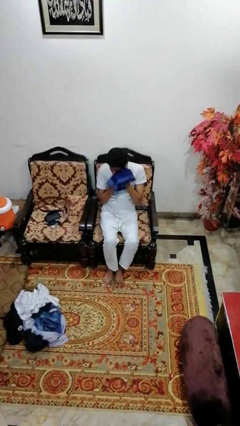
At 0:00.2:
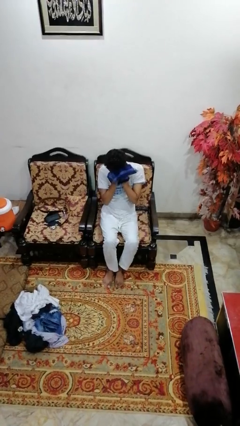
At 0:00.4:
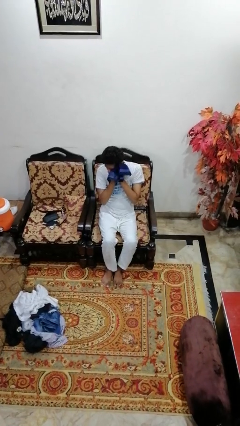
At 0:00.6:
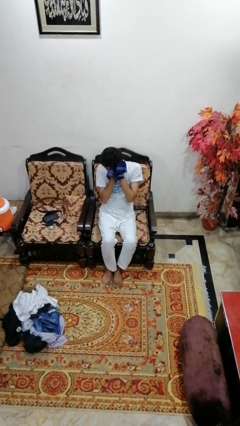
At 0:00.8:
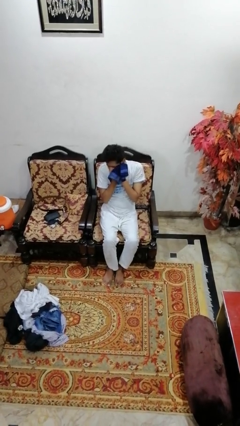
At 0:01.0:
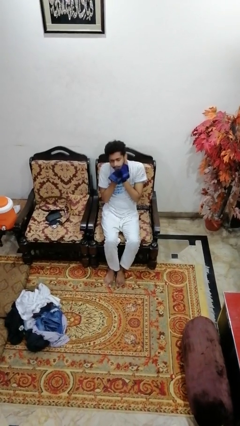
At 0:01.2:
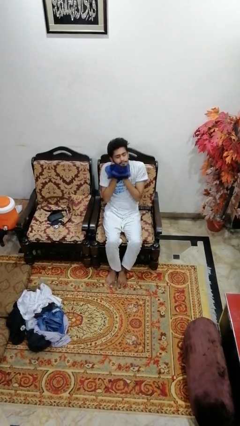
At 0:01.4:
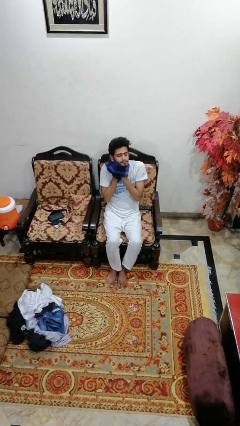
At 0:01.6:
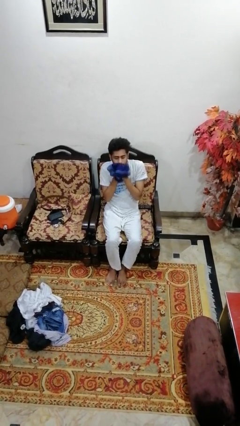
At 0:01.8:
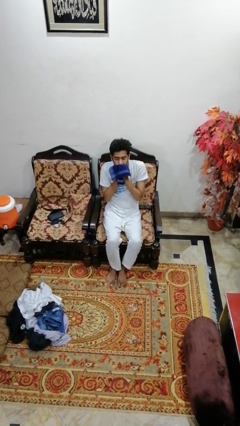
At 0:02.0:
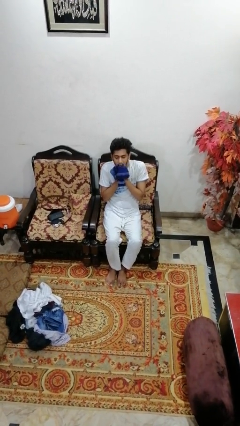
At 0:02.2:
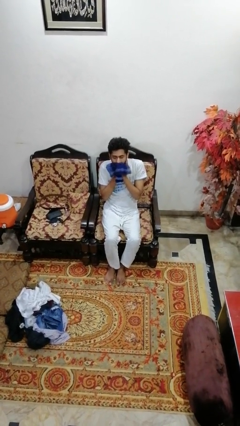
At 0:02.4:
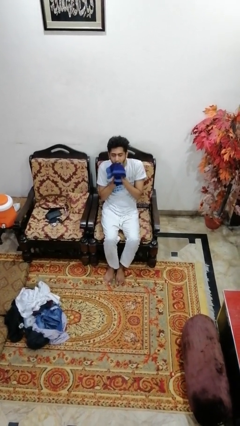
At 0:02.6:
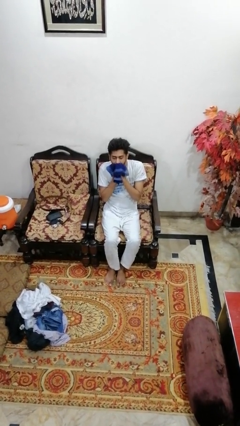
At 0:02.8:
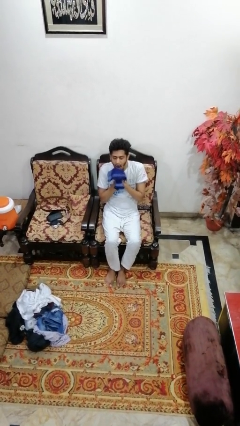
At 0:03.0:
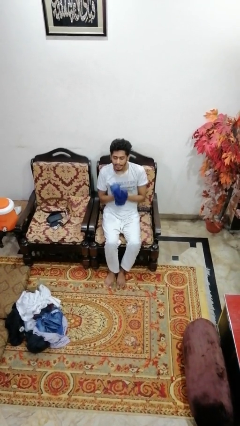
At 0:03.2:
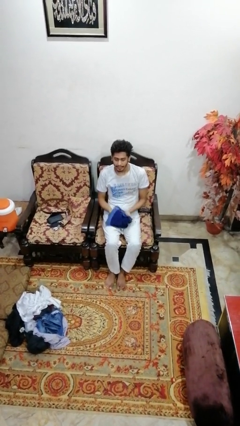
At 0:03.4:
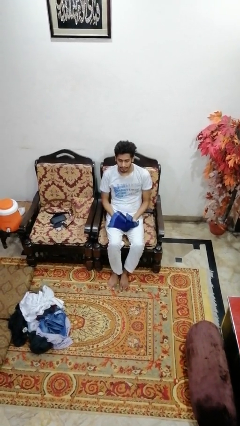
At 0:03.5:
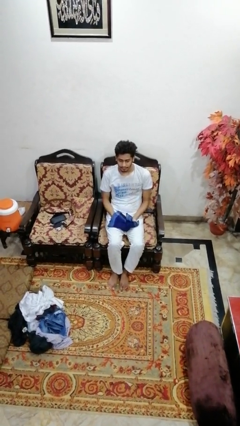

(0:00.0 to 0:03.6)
person wipes mouth with napkin

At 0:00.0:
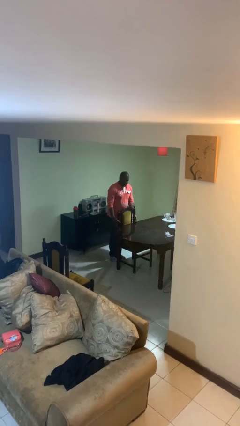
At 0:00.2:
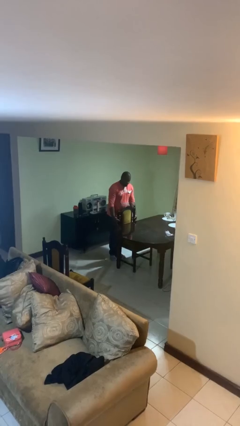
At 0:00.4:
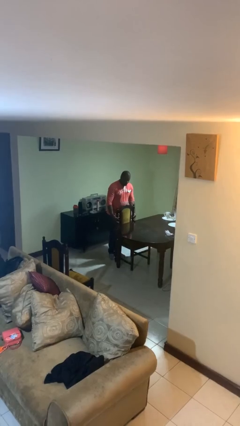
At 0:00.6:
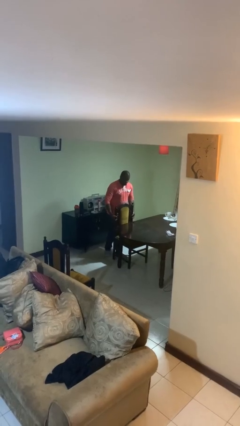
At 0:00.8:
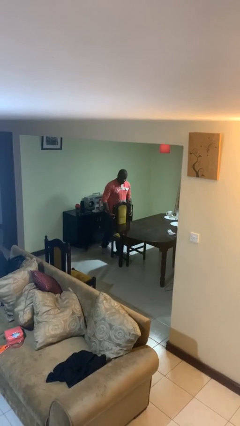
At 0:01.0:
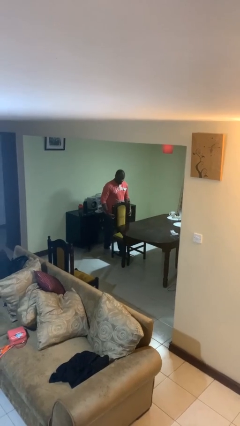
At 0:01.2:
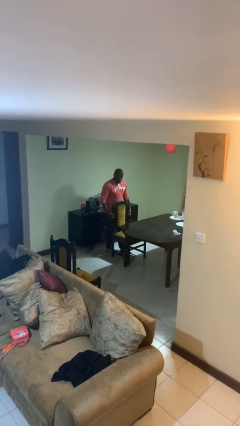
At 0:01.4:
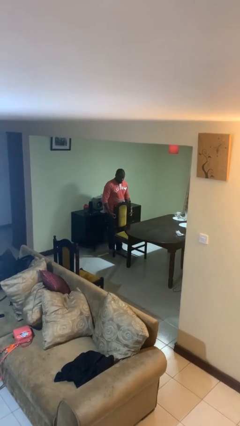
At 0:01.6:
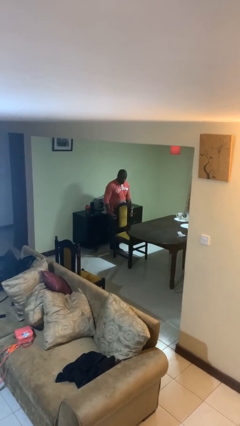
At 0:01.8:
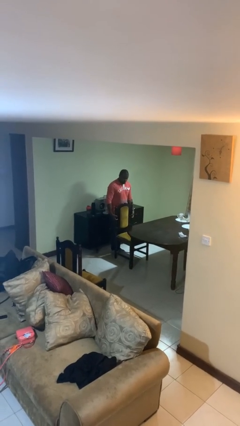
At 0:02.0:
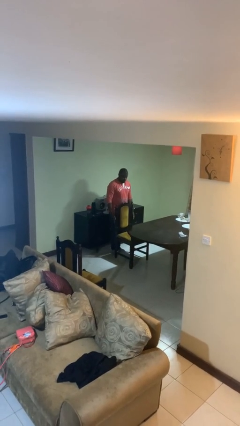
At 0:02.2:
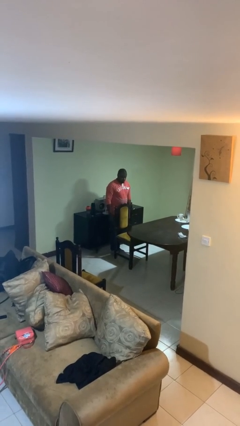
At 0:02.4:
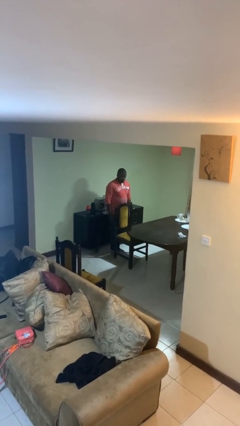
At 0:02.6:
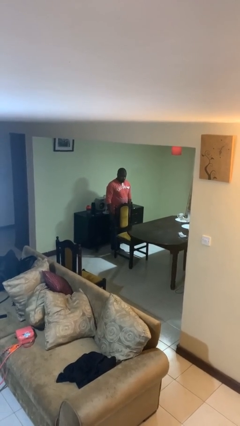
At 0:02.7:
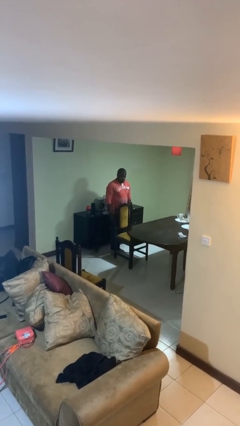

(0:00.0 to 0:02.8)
person pulls out chair

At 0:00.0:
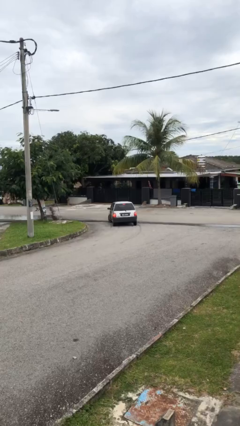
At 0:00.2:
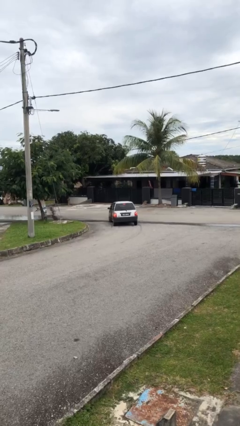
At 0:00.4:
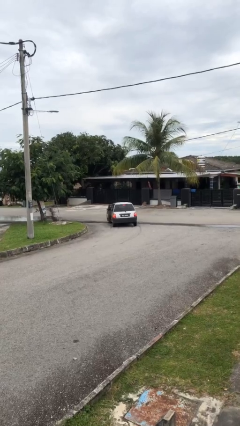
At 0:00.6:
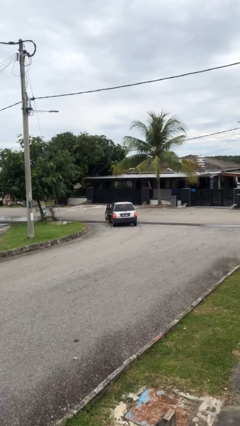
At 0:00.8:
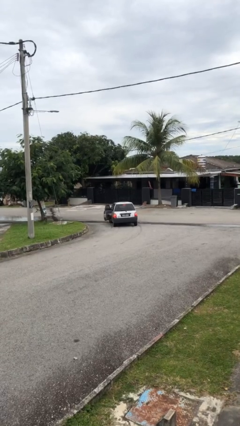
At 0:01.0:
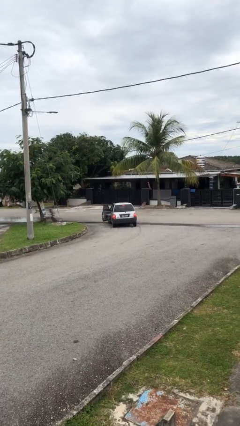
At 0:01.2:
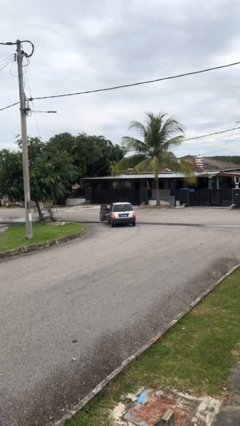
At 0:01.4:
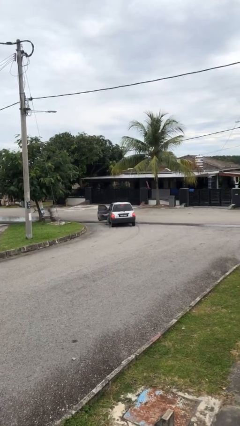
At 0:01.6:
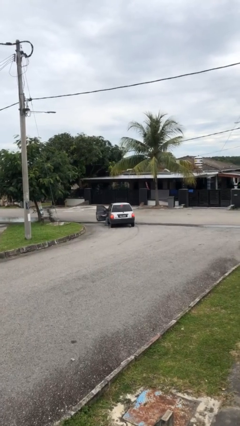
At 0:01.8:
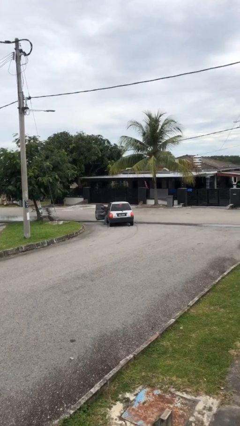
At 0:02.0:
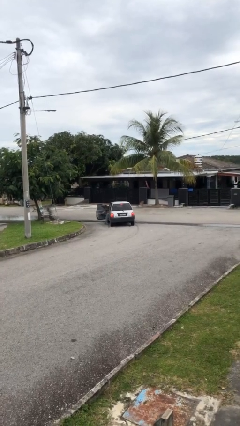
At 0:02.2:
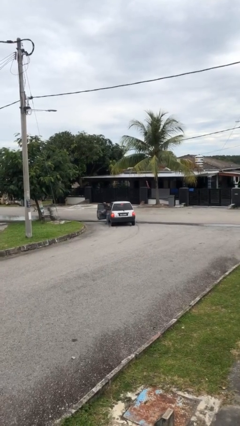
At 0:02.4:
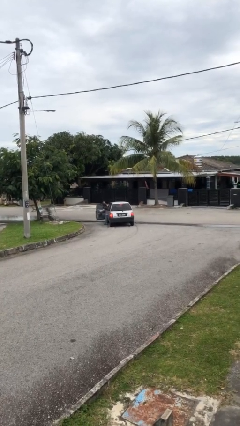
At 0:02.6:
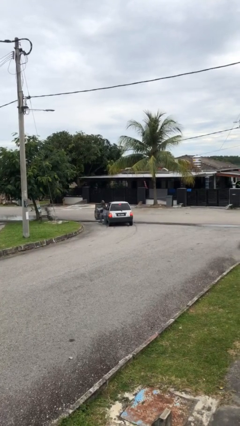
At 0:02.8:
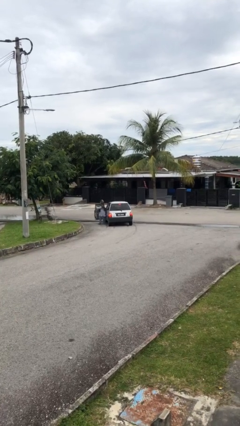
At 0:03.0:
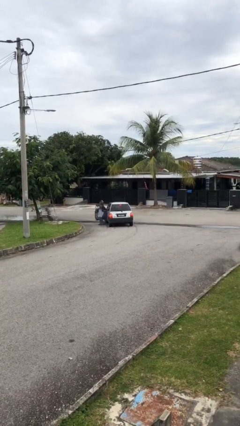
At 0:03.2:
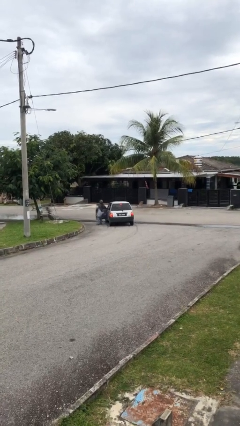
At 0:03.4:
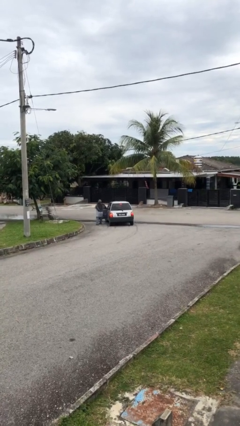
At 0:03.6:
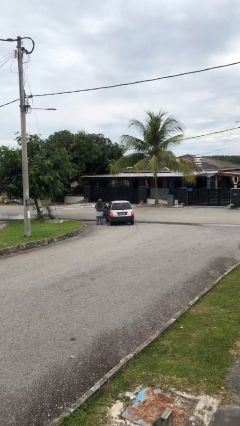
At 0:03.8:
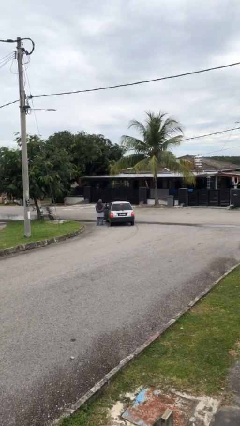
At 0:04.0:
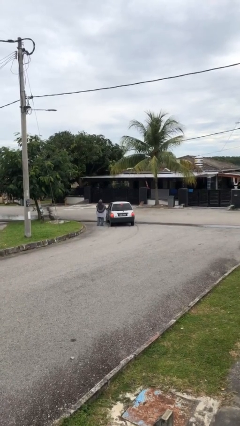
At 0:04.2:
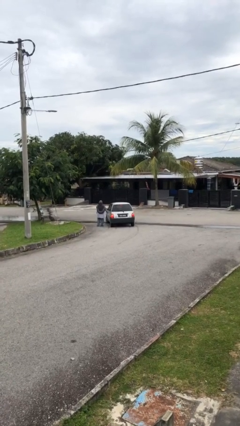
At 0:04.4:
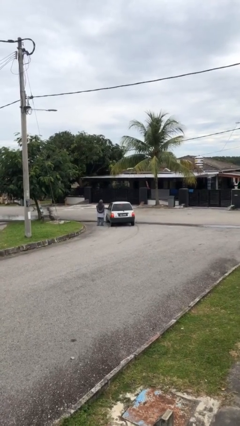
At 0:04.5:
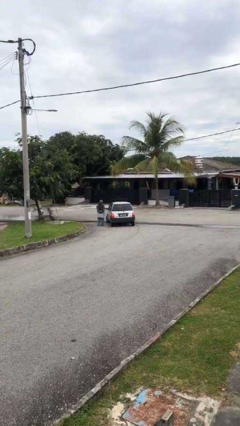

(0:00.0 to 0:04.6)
car drops off person

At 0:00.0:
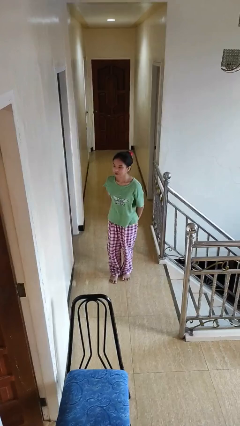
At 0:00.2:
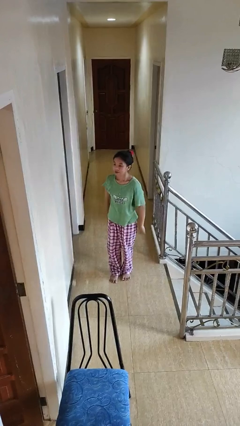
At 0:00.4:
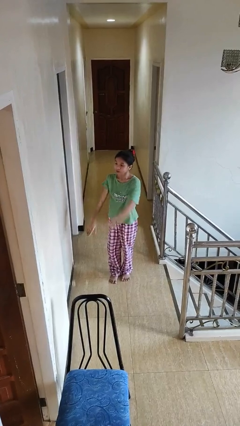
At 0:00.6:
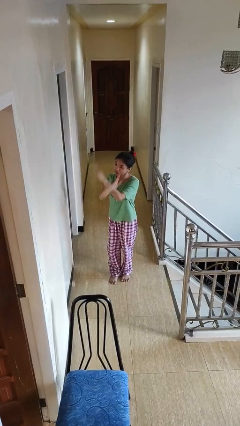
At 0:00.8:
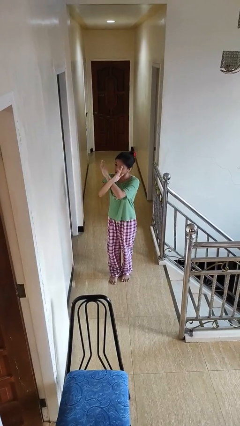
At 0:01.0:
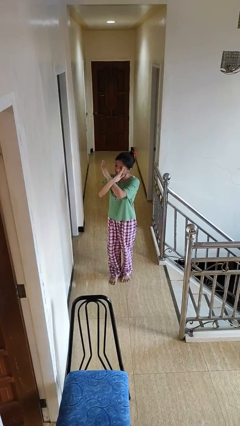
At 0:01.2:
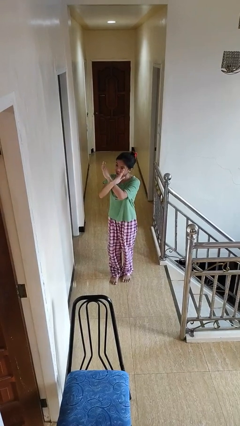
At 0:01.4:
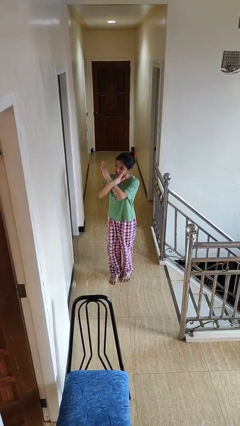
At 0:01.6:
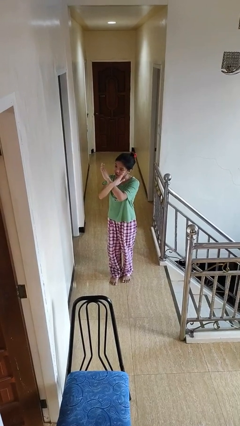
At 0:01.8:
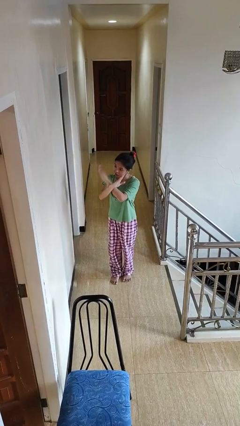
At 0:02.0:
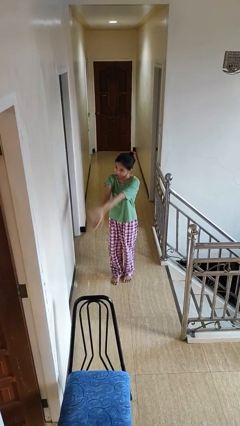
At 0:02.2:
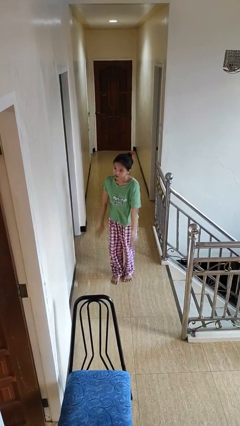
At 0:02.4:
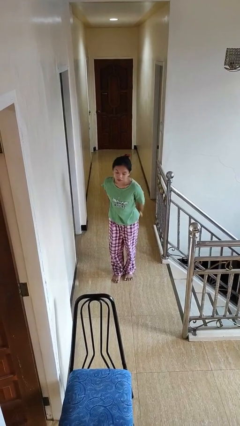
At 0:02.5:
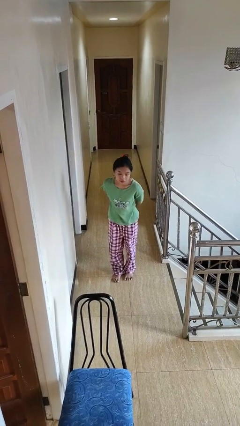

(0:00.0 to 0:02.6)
person gestures arms x

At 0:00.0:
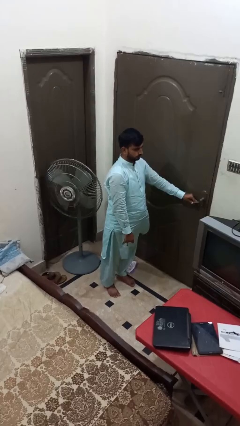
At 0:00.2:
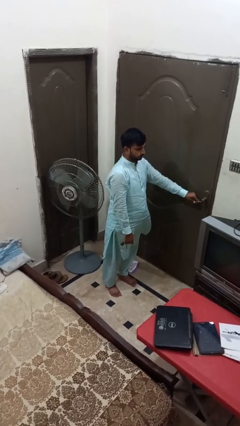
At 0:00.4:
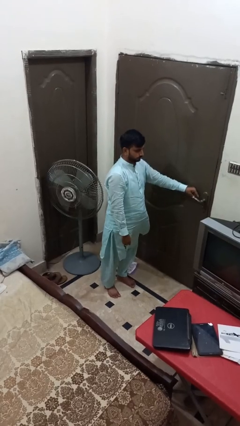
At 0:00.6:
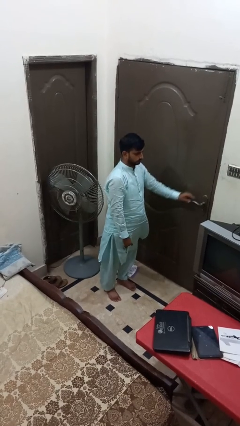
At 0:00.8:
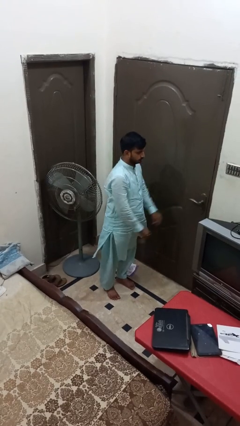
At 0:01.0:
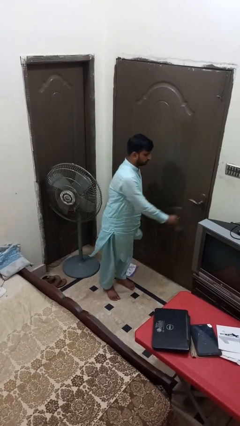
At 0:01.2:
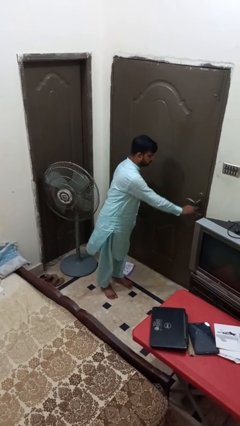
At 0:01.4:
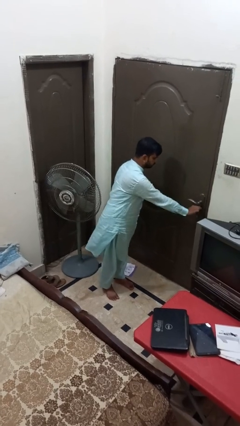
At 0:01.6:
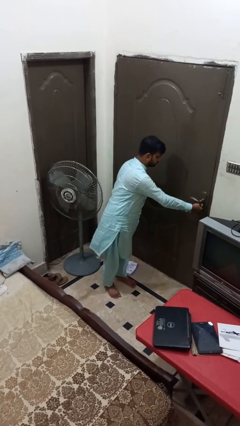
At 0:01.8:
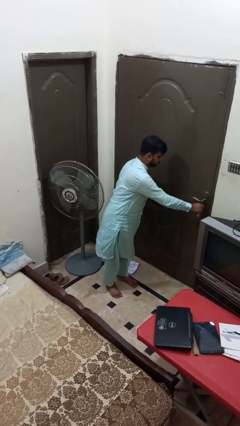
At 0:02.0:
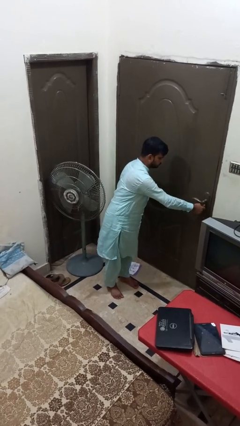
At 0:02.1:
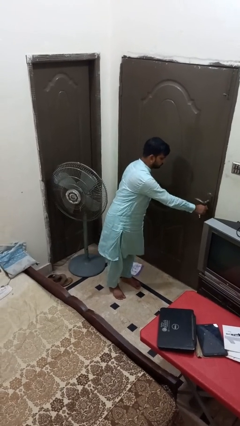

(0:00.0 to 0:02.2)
person locks door with keys

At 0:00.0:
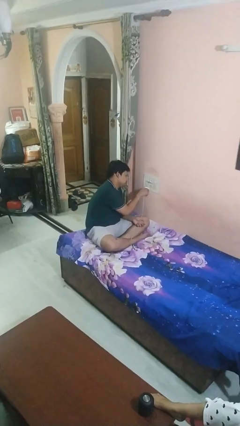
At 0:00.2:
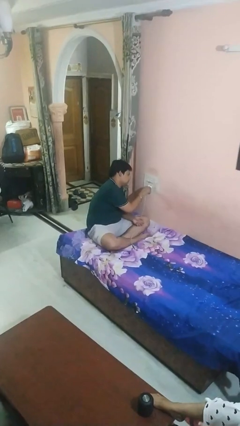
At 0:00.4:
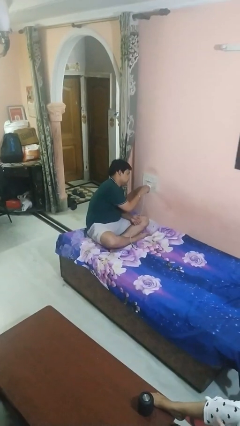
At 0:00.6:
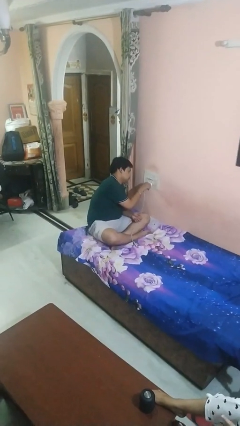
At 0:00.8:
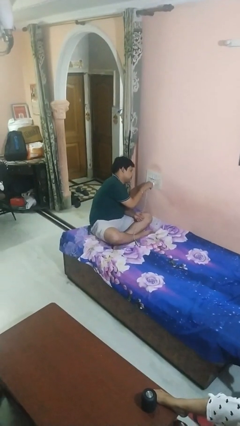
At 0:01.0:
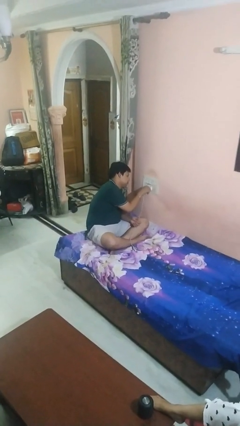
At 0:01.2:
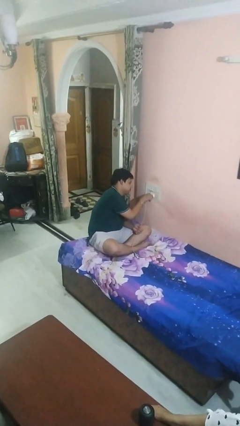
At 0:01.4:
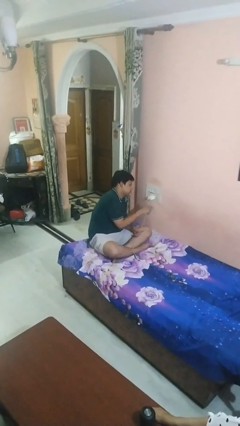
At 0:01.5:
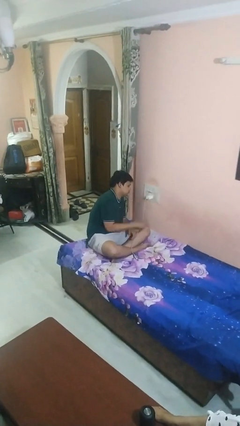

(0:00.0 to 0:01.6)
person plugs into electrical socket
